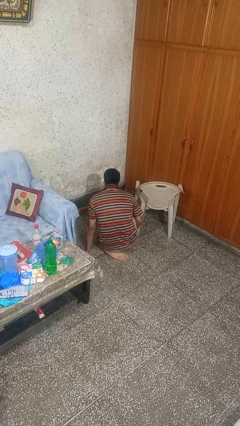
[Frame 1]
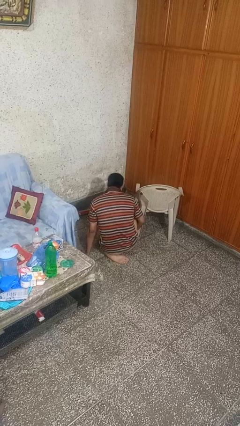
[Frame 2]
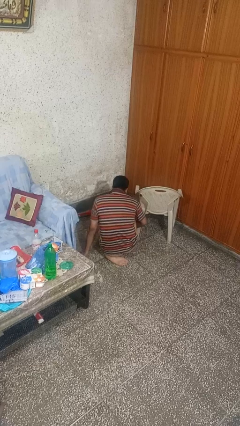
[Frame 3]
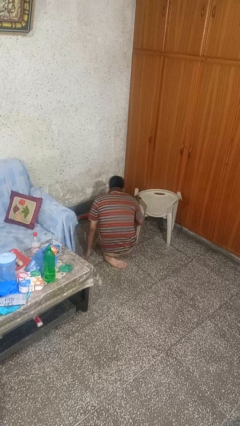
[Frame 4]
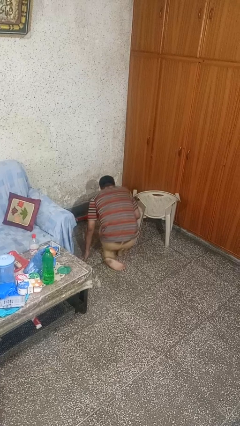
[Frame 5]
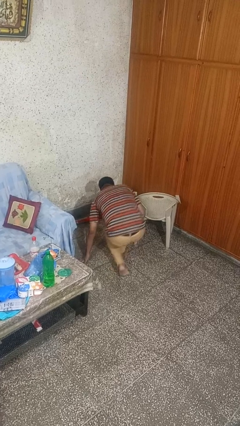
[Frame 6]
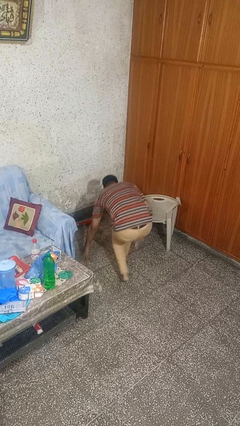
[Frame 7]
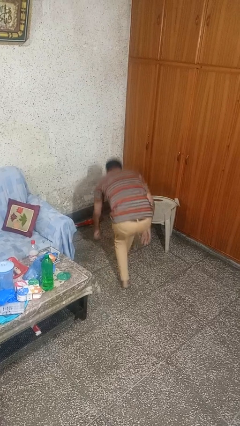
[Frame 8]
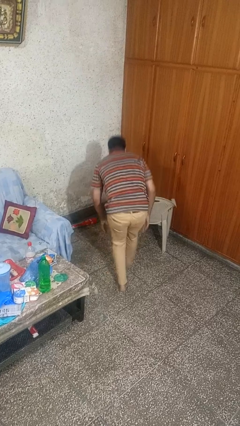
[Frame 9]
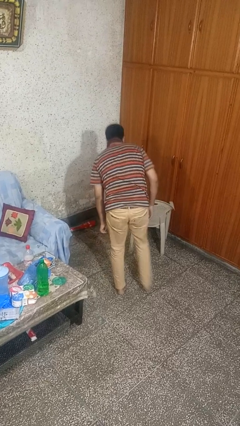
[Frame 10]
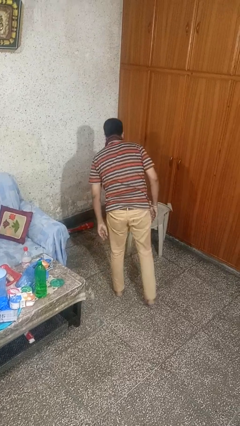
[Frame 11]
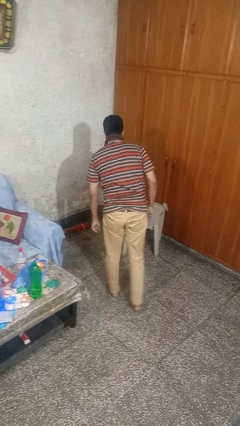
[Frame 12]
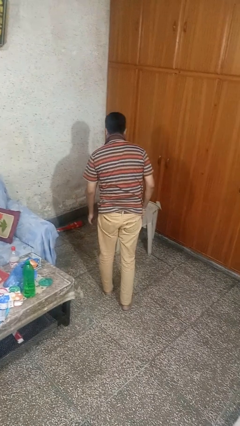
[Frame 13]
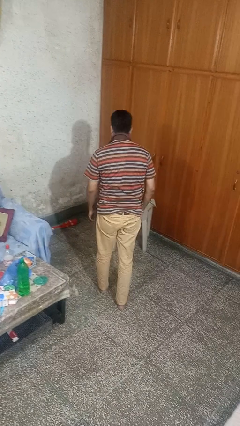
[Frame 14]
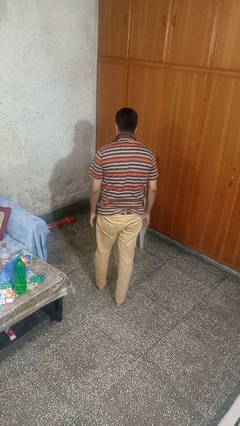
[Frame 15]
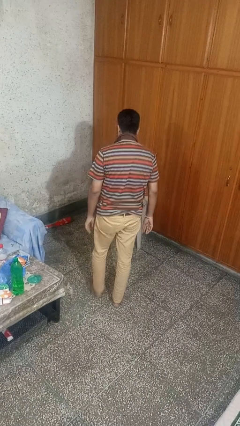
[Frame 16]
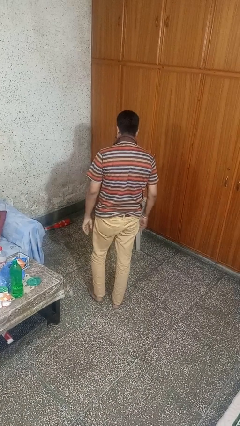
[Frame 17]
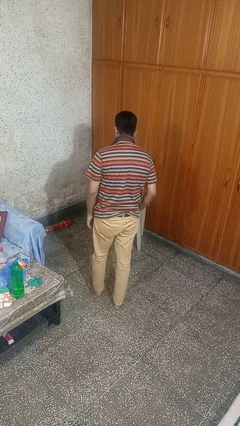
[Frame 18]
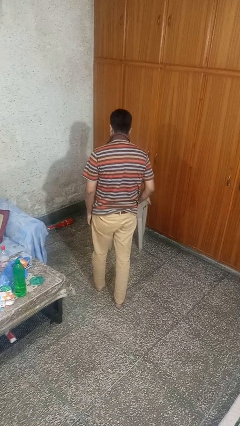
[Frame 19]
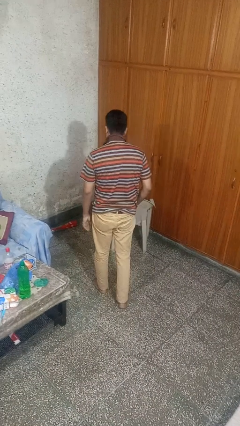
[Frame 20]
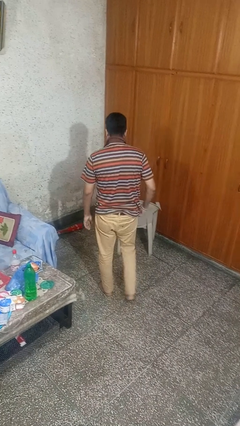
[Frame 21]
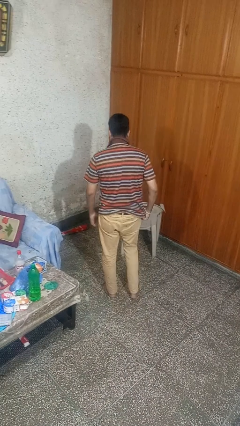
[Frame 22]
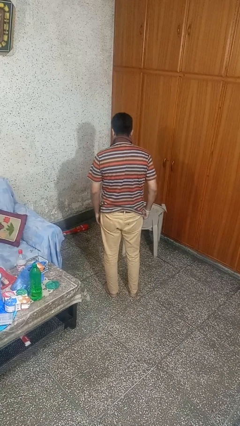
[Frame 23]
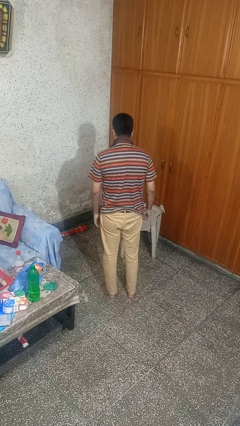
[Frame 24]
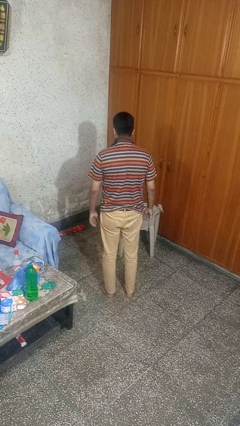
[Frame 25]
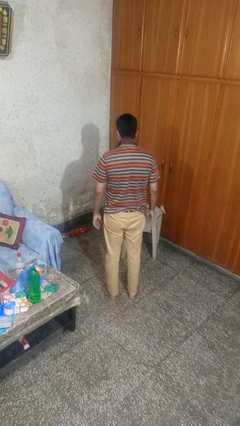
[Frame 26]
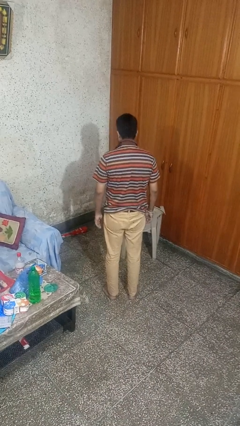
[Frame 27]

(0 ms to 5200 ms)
person stands up from floor

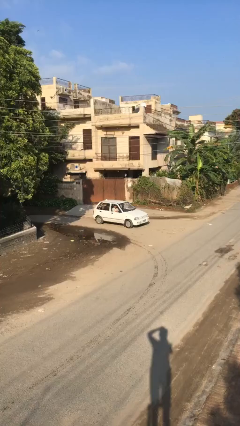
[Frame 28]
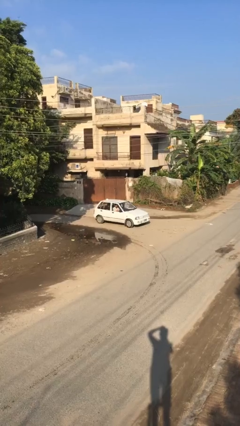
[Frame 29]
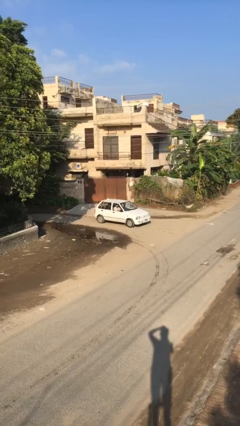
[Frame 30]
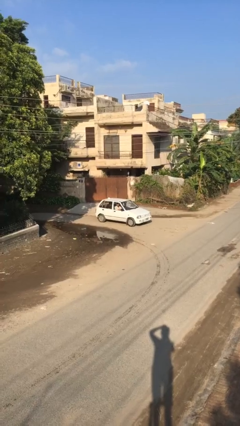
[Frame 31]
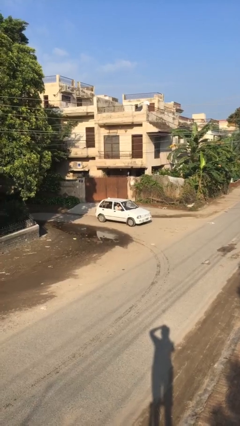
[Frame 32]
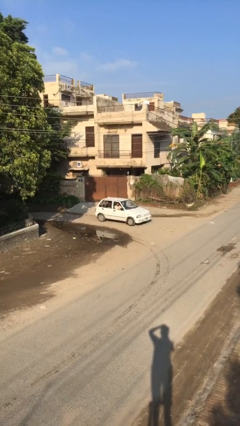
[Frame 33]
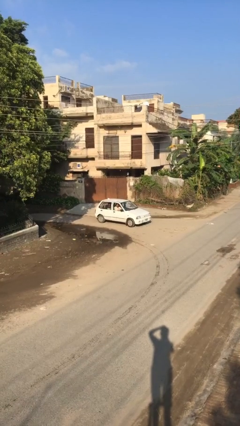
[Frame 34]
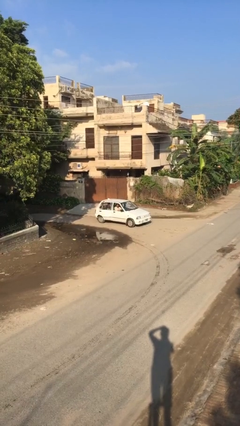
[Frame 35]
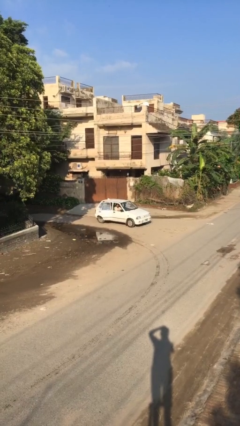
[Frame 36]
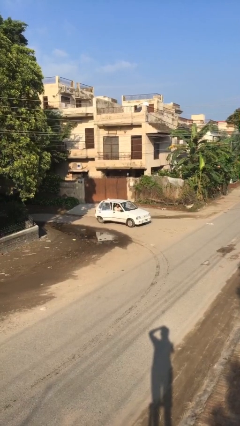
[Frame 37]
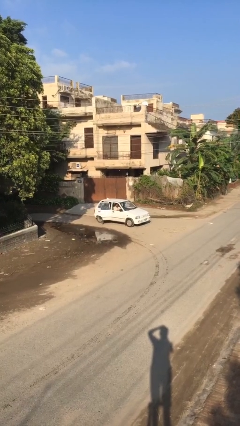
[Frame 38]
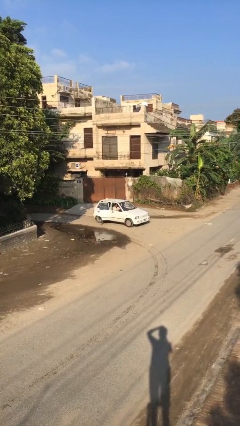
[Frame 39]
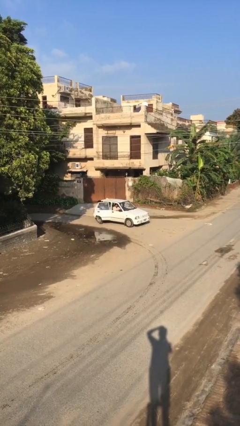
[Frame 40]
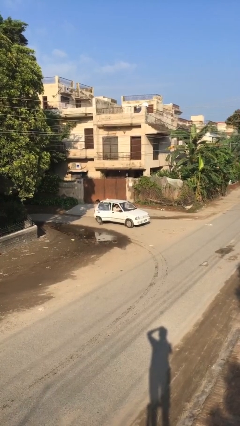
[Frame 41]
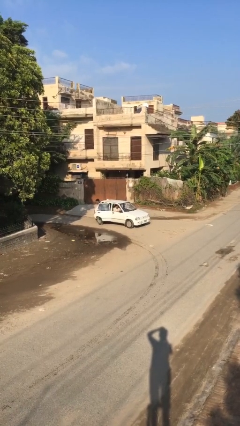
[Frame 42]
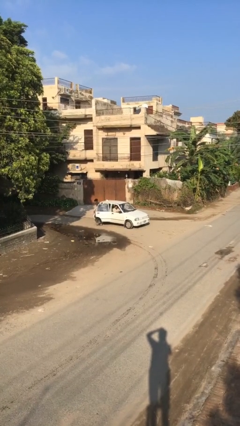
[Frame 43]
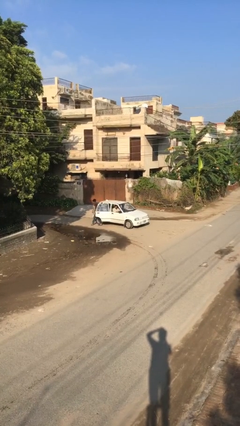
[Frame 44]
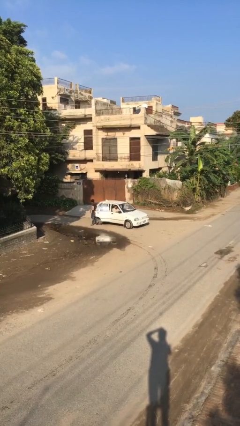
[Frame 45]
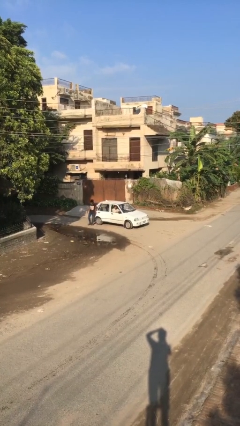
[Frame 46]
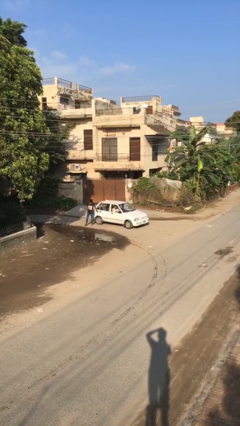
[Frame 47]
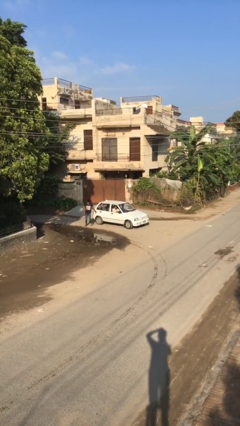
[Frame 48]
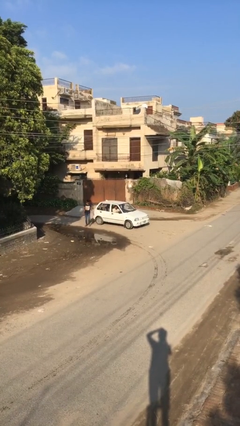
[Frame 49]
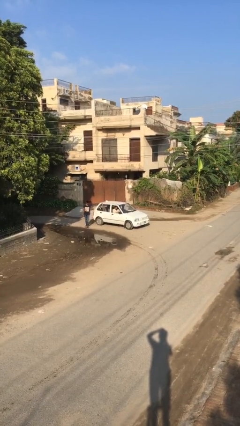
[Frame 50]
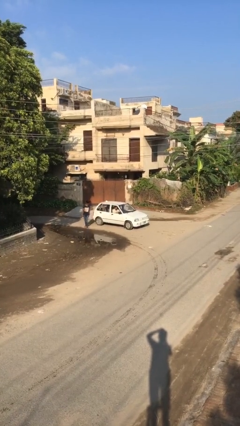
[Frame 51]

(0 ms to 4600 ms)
car drops off person

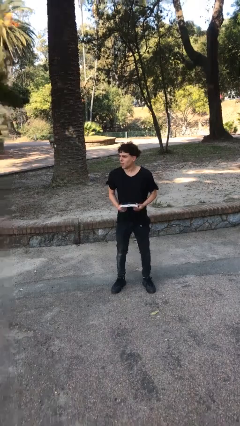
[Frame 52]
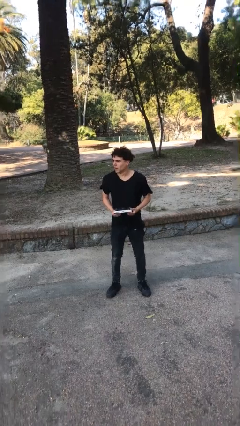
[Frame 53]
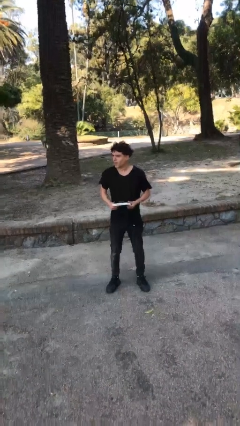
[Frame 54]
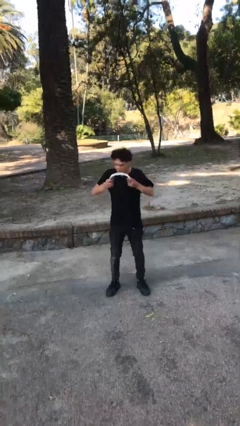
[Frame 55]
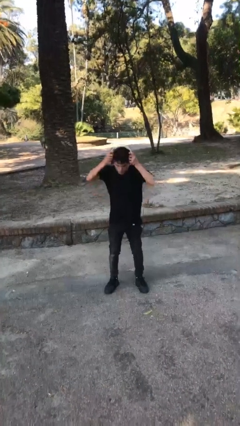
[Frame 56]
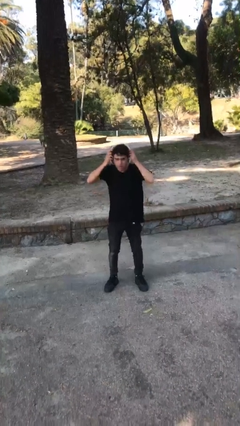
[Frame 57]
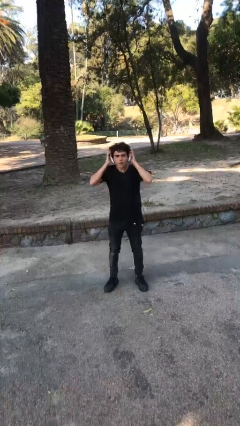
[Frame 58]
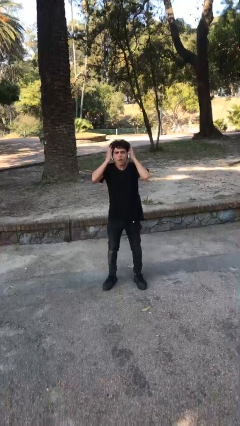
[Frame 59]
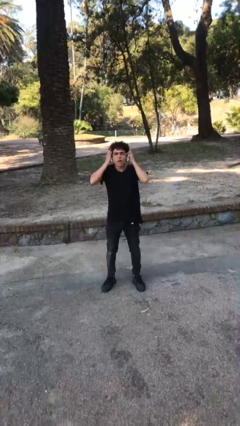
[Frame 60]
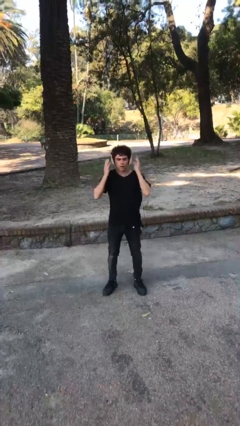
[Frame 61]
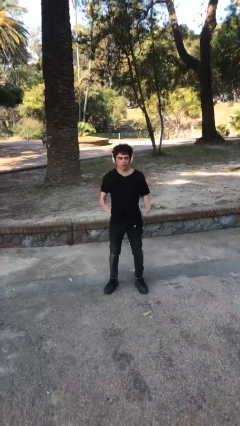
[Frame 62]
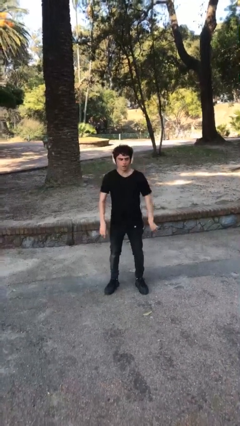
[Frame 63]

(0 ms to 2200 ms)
person puts on headphones

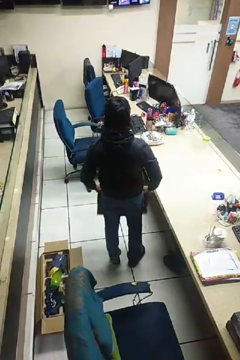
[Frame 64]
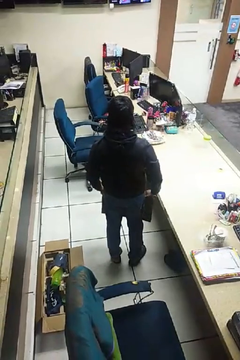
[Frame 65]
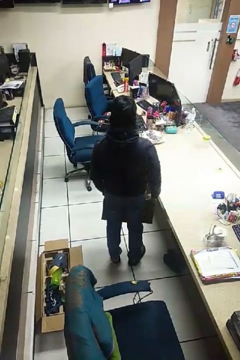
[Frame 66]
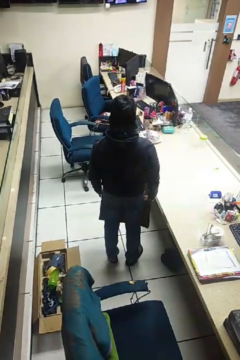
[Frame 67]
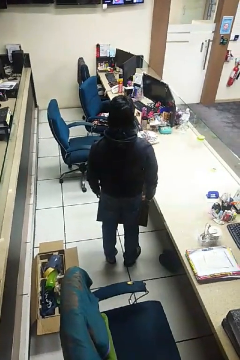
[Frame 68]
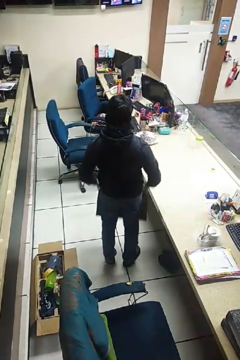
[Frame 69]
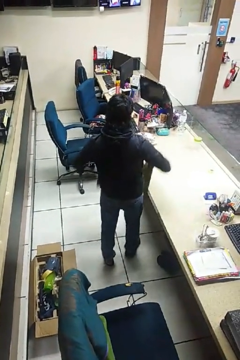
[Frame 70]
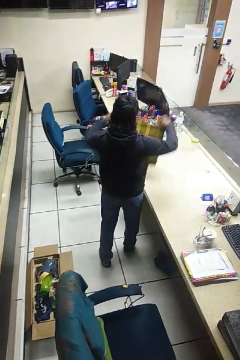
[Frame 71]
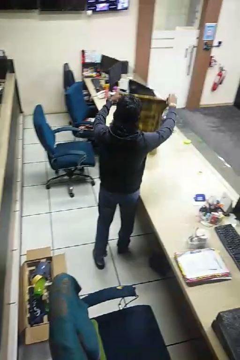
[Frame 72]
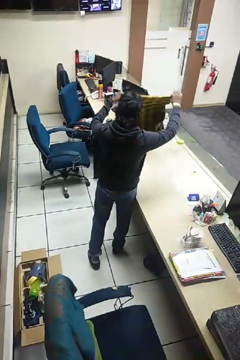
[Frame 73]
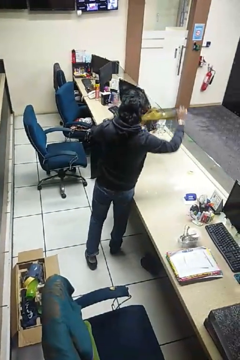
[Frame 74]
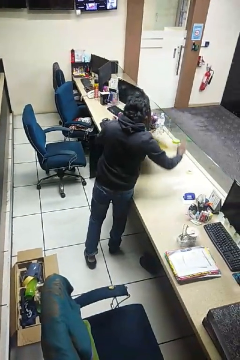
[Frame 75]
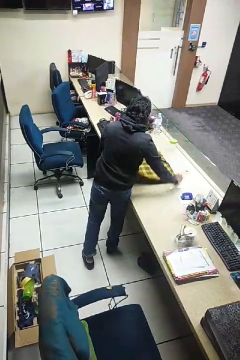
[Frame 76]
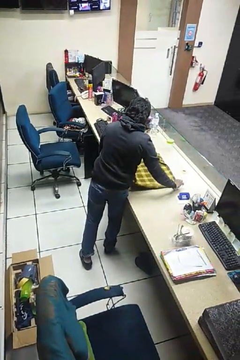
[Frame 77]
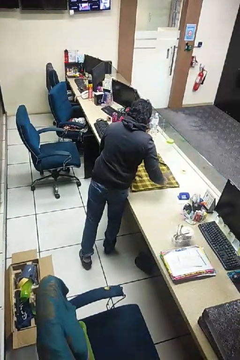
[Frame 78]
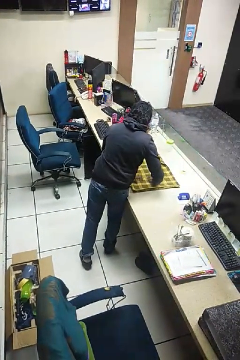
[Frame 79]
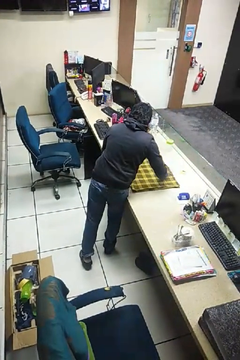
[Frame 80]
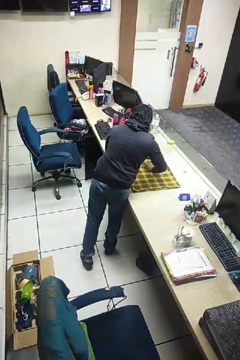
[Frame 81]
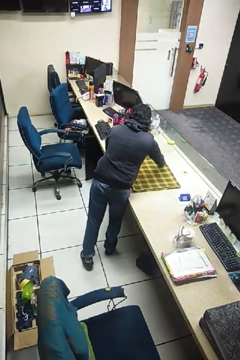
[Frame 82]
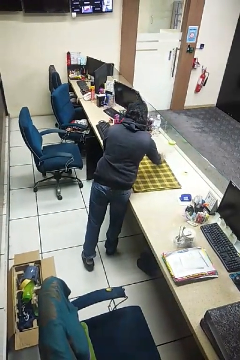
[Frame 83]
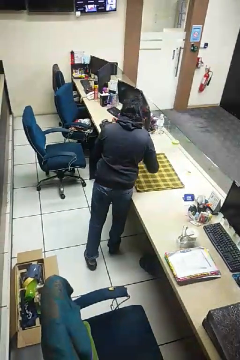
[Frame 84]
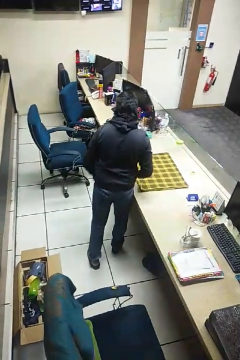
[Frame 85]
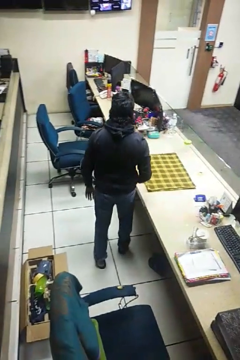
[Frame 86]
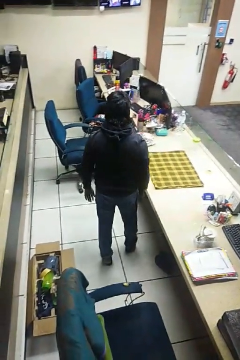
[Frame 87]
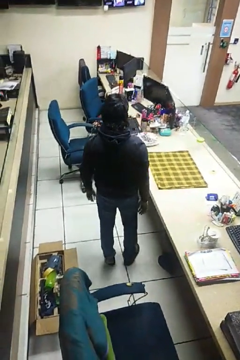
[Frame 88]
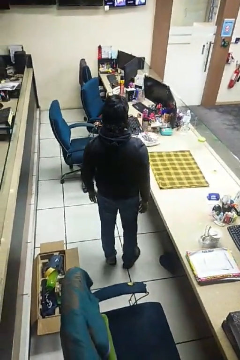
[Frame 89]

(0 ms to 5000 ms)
person spreads tablecloth

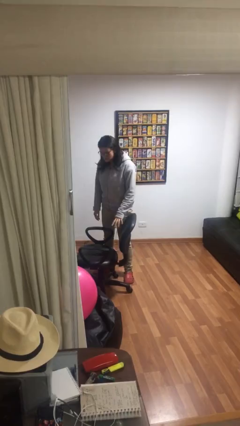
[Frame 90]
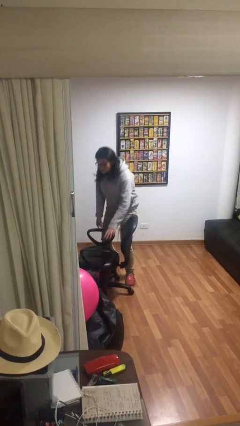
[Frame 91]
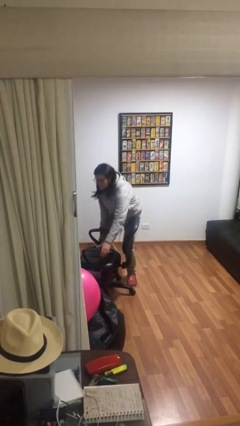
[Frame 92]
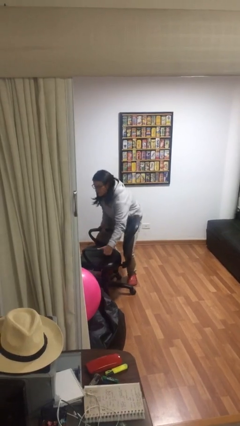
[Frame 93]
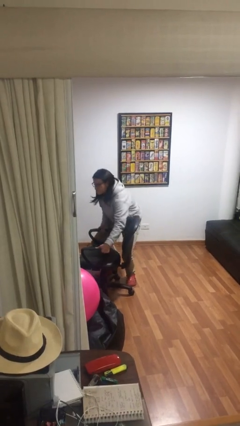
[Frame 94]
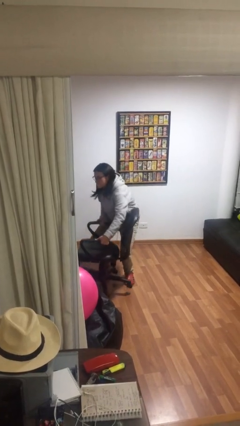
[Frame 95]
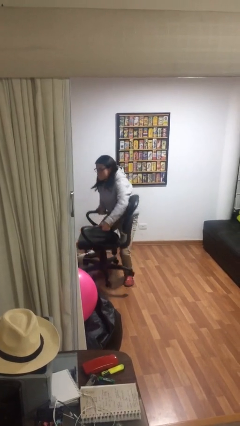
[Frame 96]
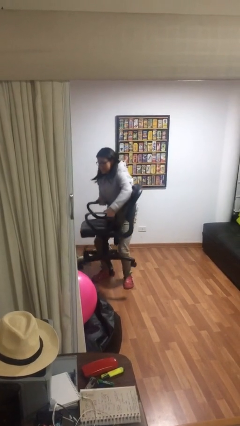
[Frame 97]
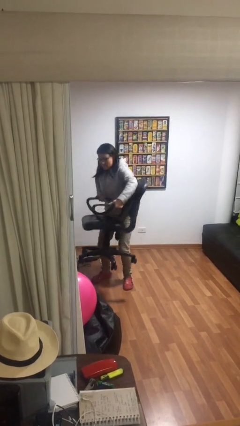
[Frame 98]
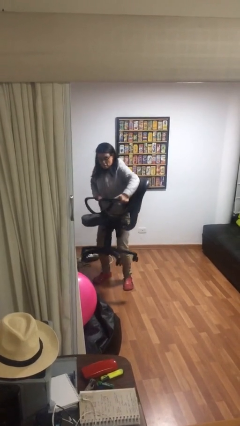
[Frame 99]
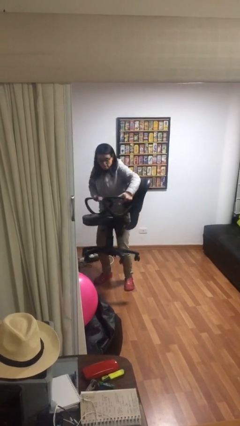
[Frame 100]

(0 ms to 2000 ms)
person picks up object from floor
